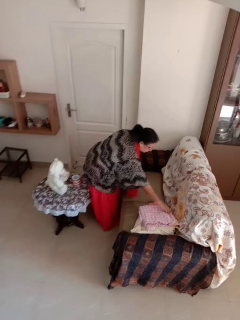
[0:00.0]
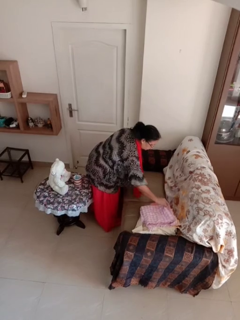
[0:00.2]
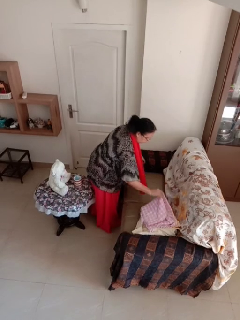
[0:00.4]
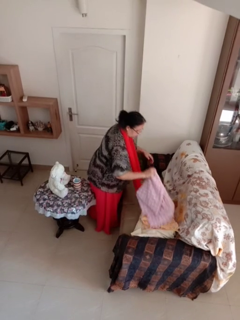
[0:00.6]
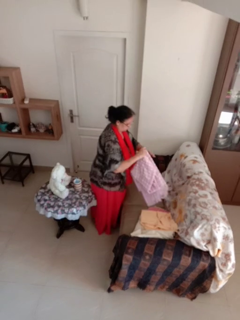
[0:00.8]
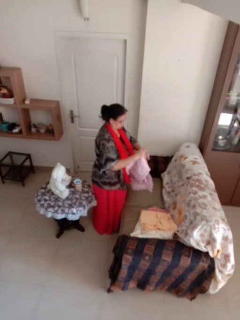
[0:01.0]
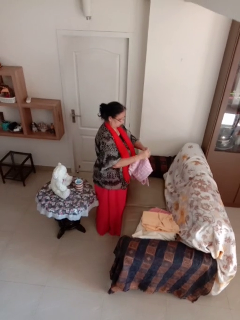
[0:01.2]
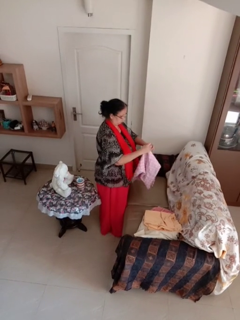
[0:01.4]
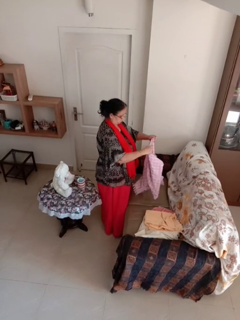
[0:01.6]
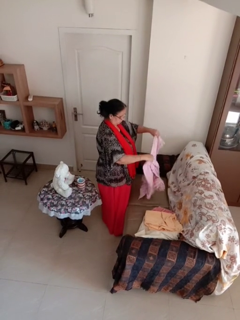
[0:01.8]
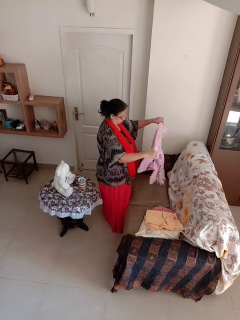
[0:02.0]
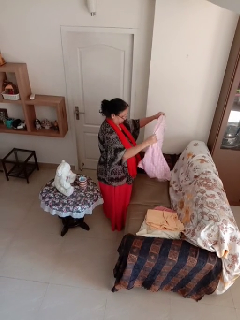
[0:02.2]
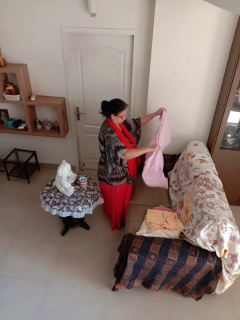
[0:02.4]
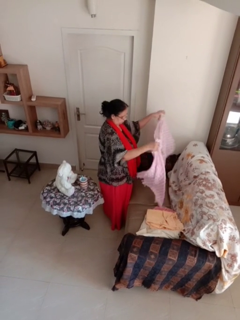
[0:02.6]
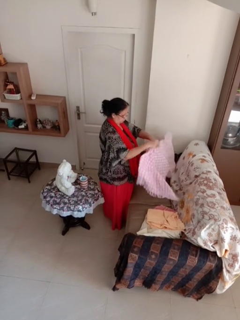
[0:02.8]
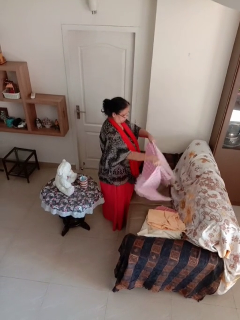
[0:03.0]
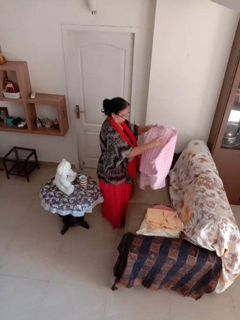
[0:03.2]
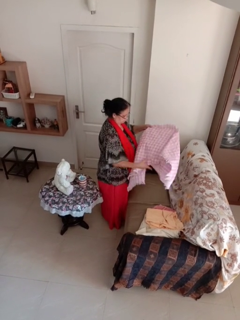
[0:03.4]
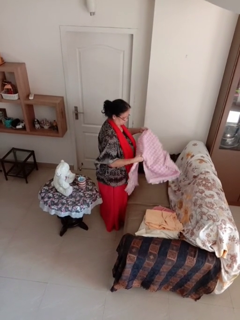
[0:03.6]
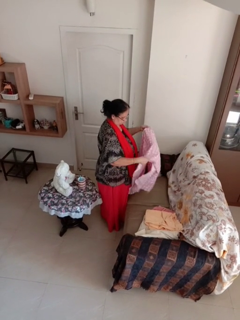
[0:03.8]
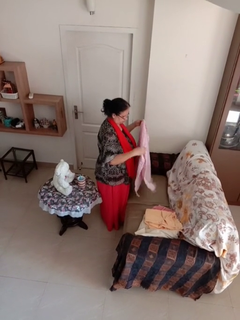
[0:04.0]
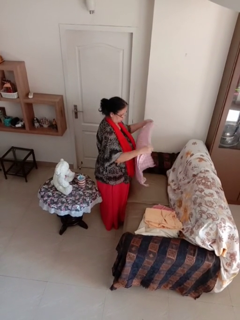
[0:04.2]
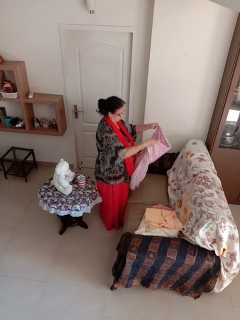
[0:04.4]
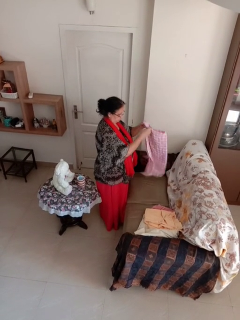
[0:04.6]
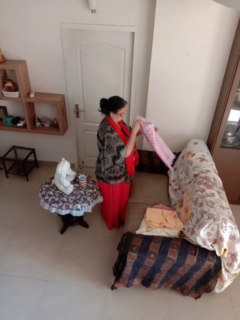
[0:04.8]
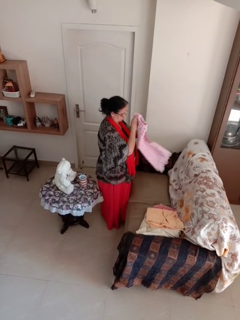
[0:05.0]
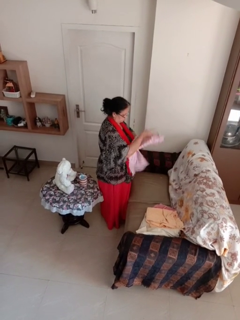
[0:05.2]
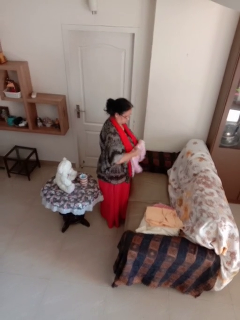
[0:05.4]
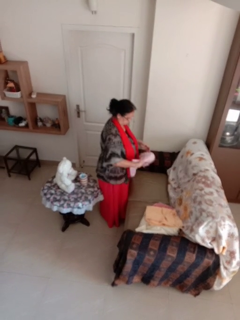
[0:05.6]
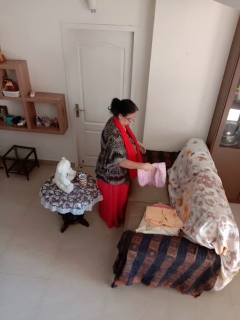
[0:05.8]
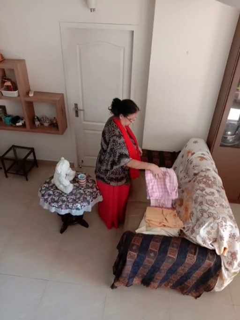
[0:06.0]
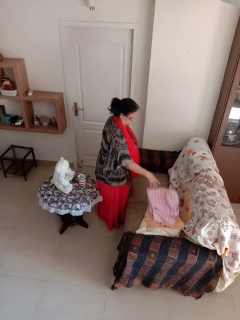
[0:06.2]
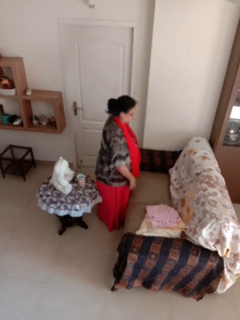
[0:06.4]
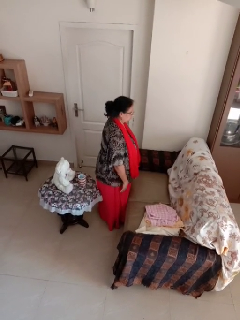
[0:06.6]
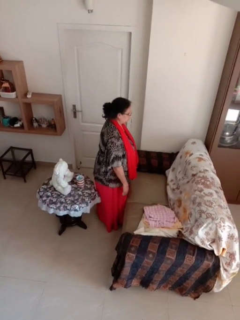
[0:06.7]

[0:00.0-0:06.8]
person folds towel

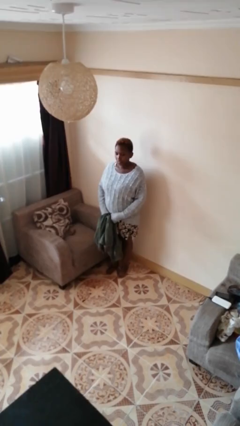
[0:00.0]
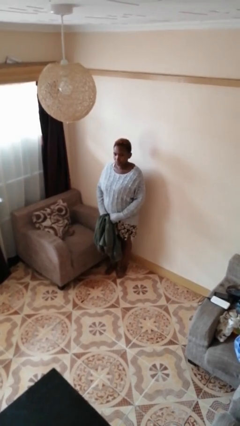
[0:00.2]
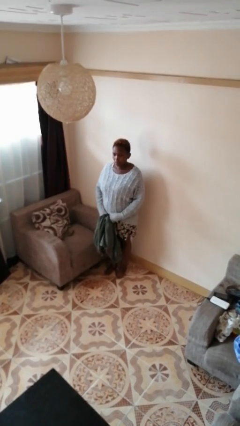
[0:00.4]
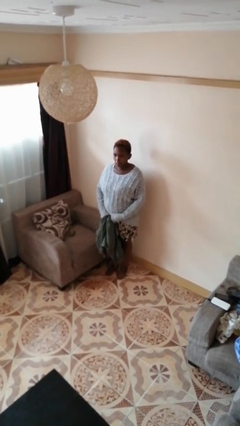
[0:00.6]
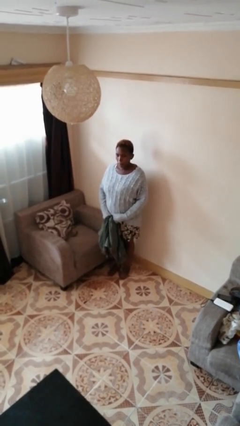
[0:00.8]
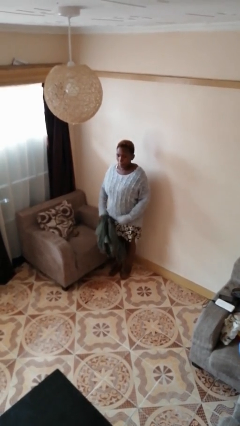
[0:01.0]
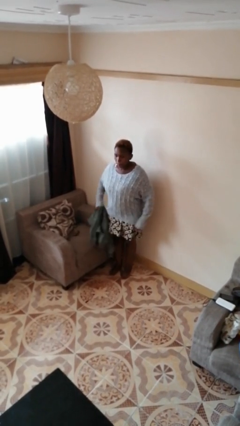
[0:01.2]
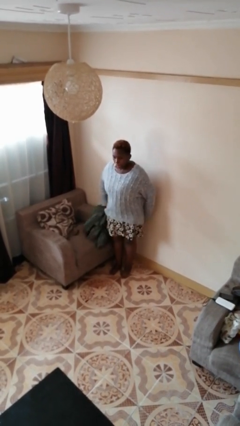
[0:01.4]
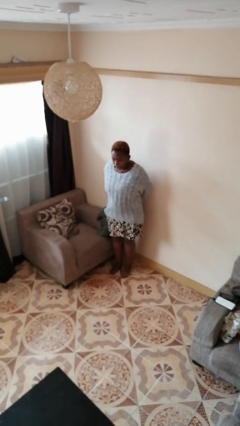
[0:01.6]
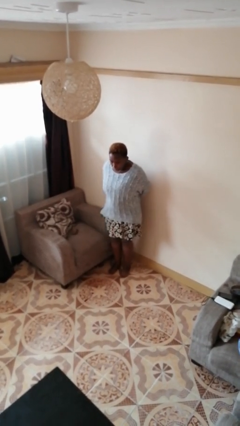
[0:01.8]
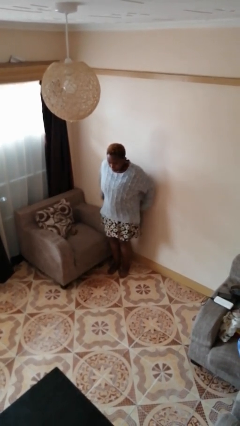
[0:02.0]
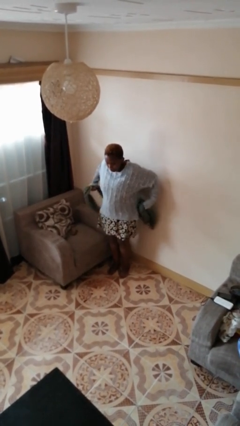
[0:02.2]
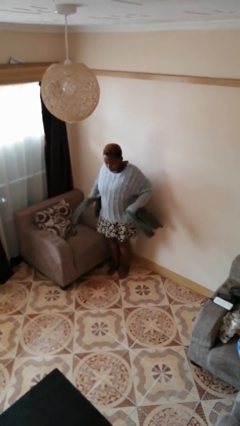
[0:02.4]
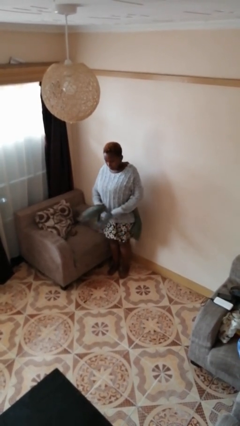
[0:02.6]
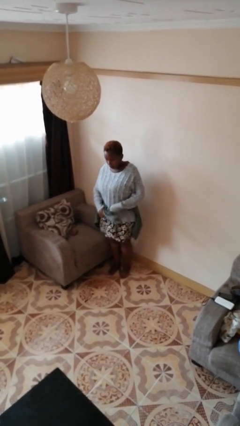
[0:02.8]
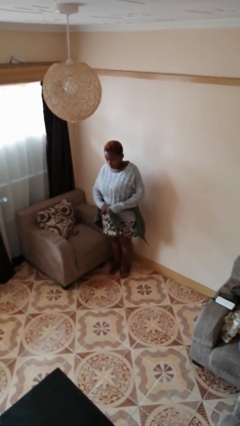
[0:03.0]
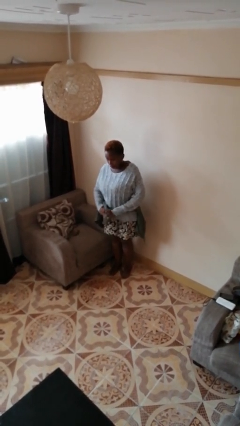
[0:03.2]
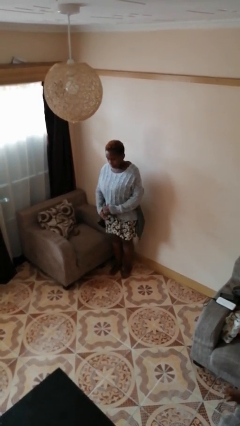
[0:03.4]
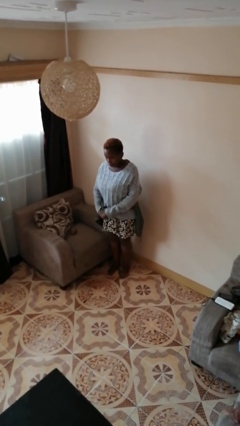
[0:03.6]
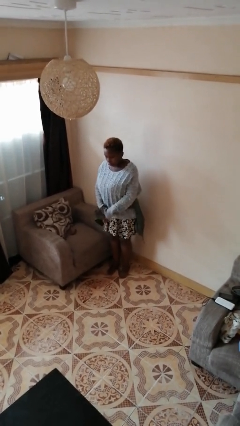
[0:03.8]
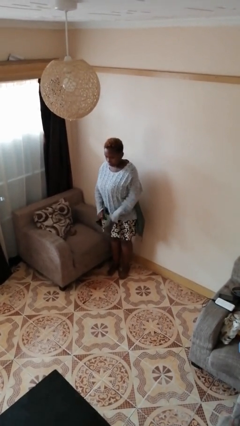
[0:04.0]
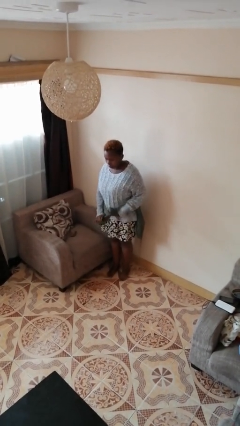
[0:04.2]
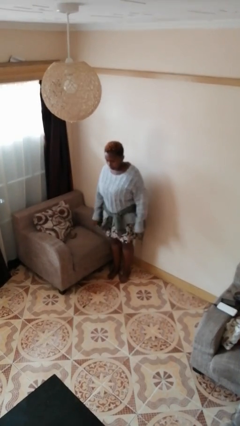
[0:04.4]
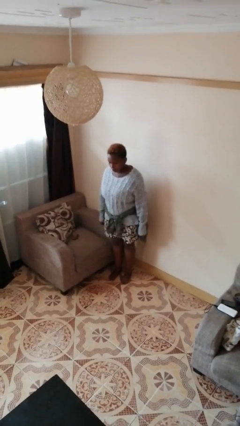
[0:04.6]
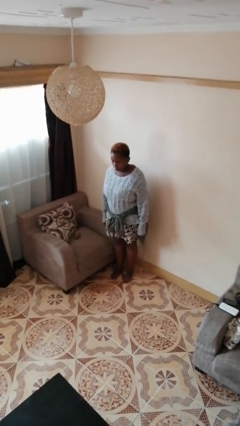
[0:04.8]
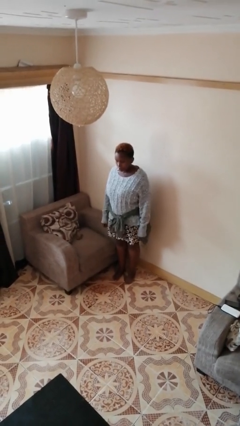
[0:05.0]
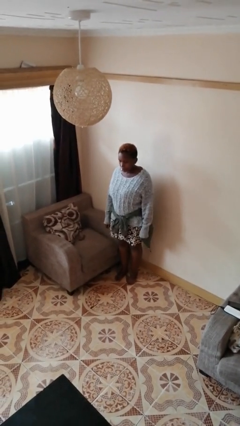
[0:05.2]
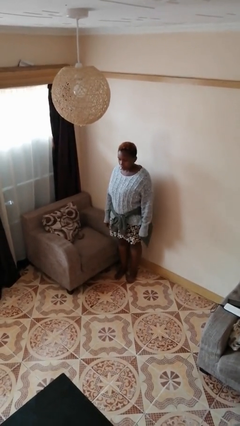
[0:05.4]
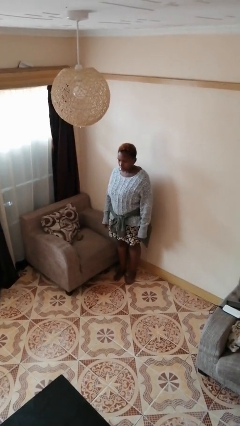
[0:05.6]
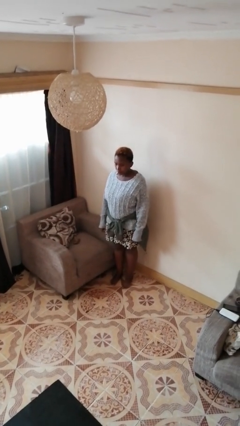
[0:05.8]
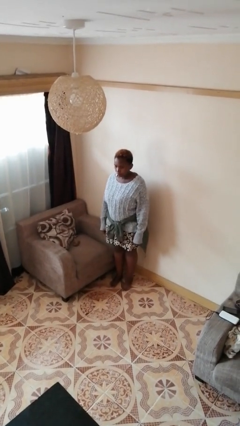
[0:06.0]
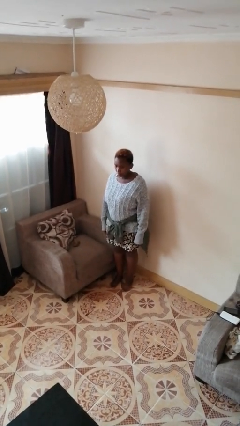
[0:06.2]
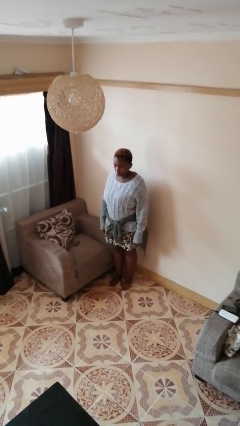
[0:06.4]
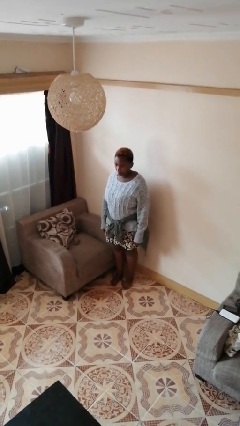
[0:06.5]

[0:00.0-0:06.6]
person ties jacket around waist

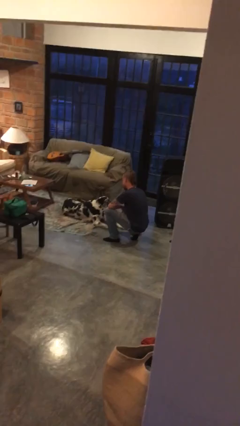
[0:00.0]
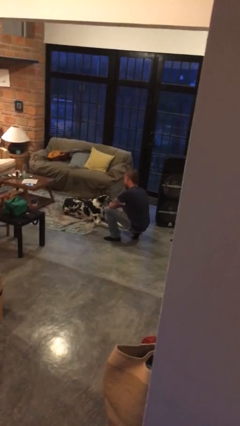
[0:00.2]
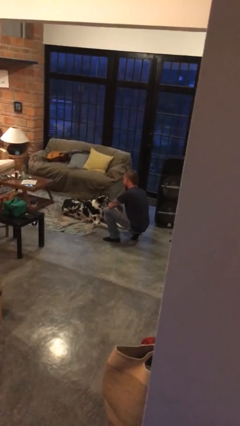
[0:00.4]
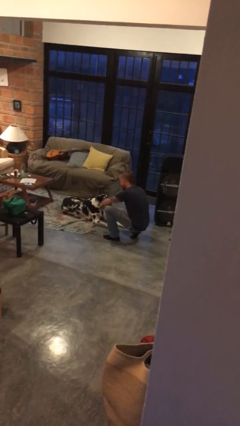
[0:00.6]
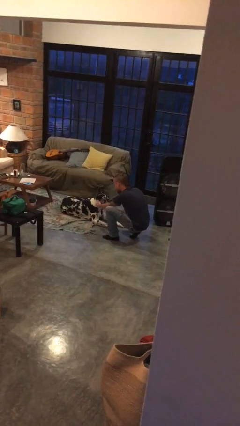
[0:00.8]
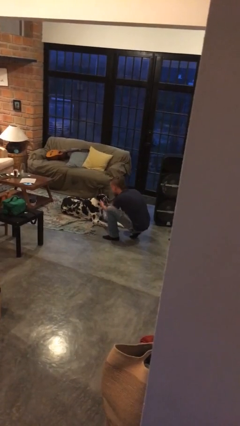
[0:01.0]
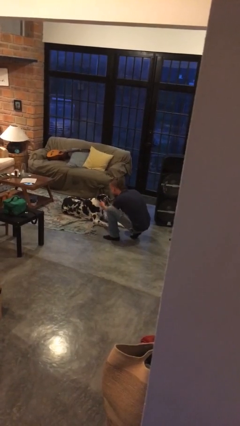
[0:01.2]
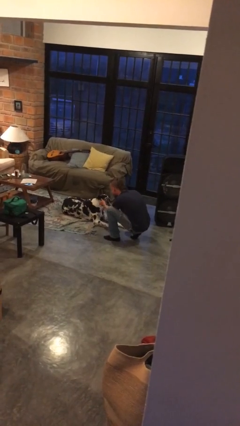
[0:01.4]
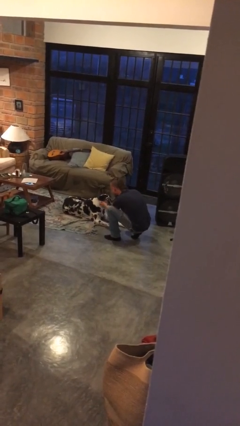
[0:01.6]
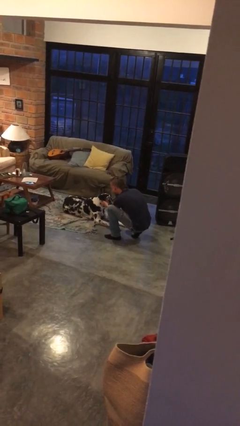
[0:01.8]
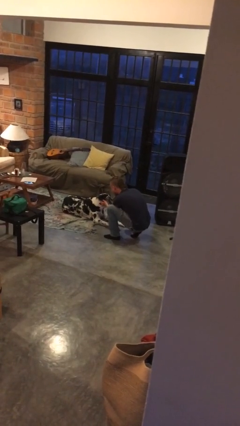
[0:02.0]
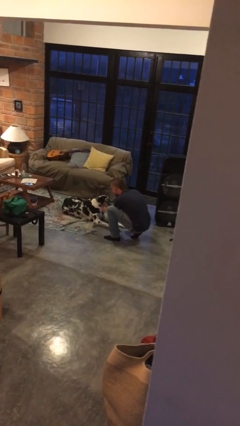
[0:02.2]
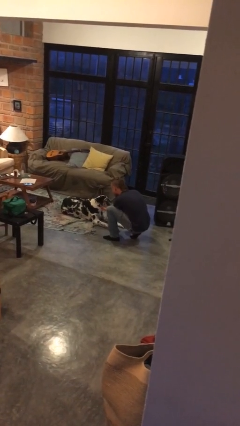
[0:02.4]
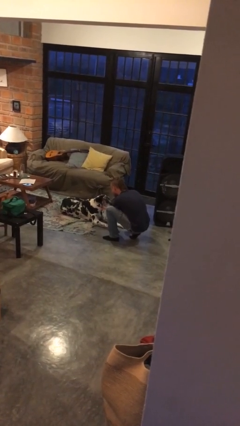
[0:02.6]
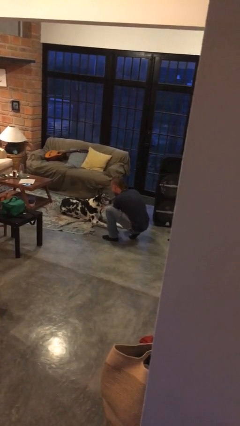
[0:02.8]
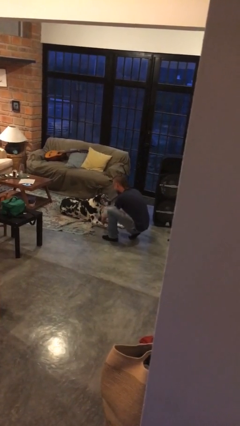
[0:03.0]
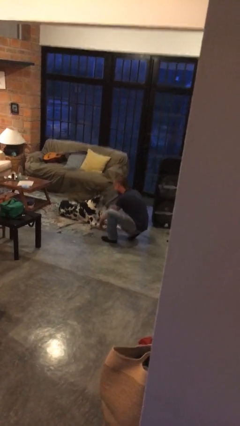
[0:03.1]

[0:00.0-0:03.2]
person pets dog

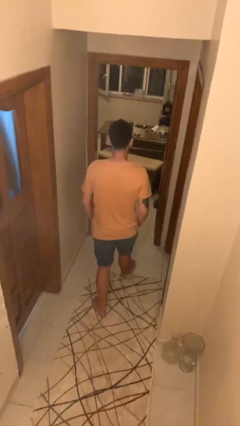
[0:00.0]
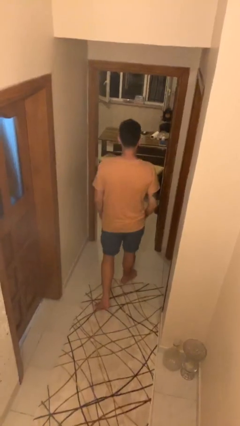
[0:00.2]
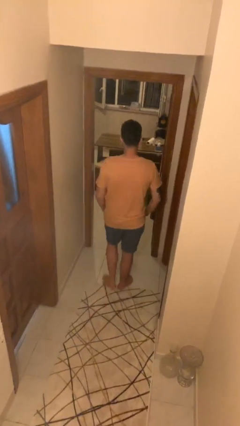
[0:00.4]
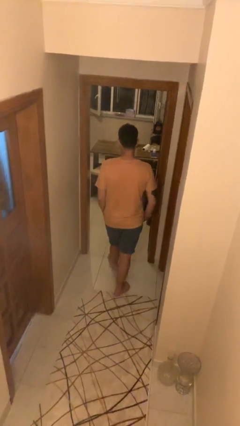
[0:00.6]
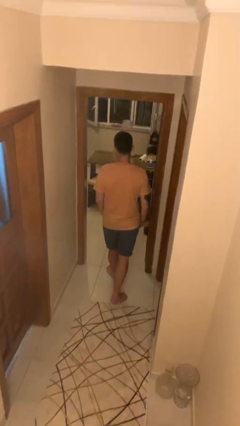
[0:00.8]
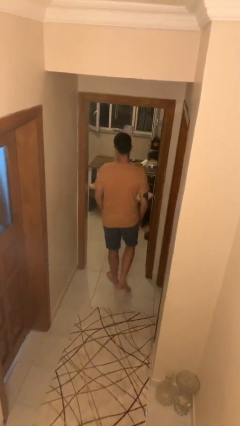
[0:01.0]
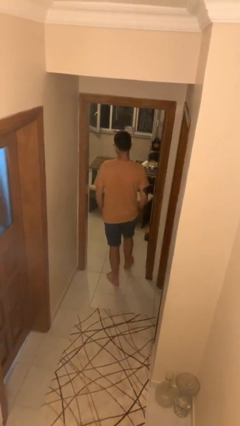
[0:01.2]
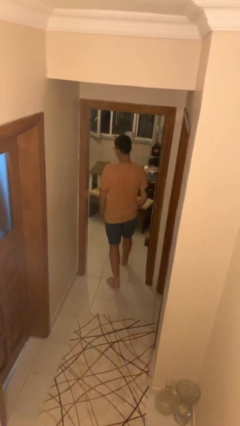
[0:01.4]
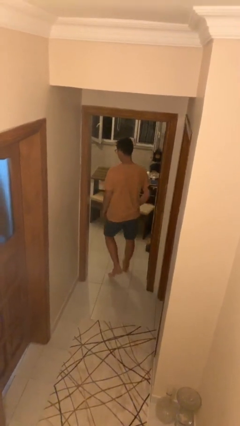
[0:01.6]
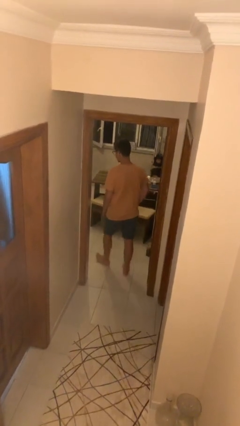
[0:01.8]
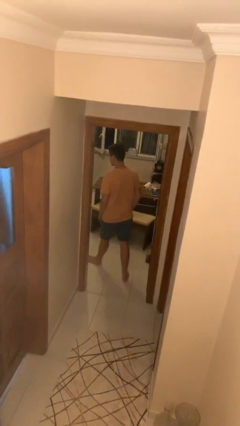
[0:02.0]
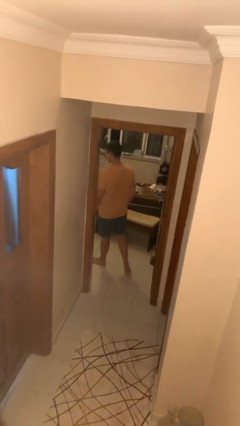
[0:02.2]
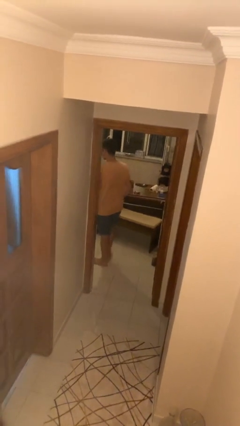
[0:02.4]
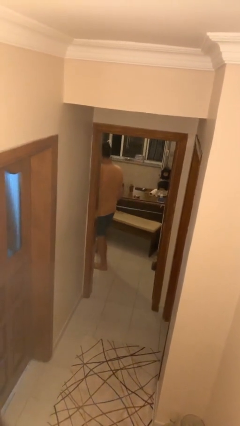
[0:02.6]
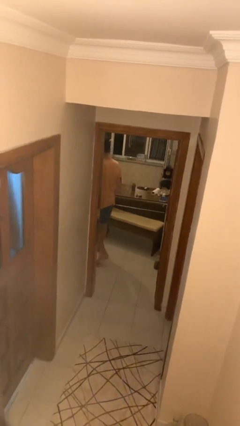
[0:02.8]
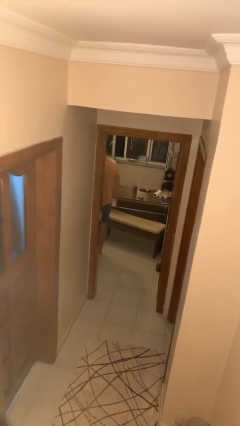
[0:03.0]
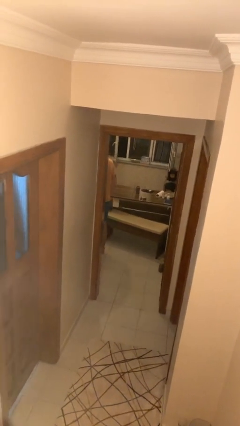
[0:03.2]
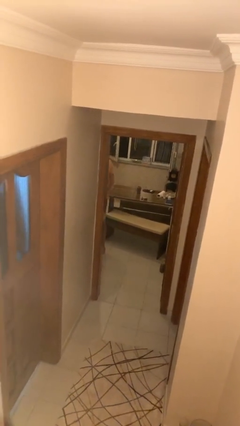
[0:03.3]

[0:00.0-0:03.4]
person exits scene through structure
